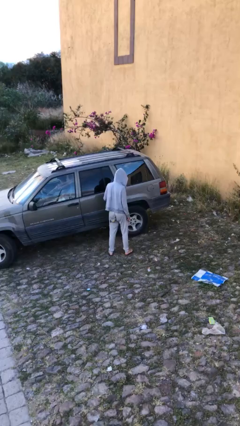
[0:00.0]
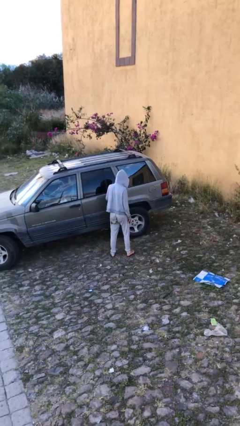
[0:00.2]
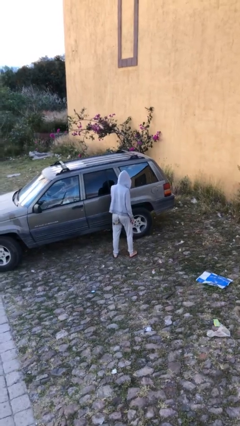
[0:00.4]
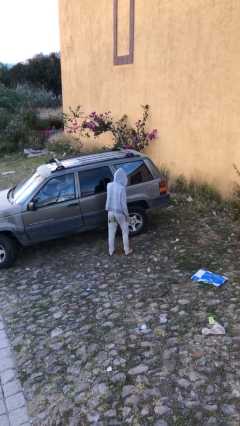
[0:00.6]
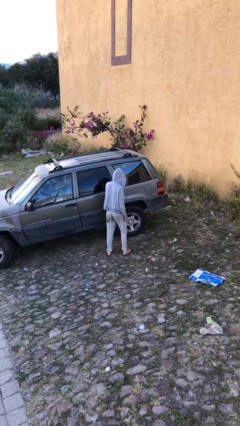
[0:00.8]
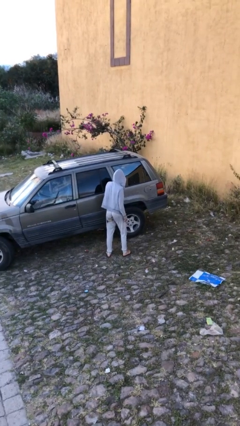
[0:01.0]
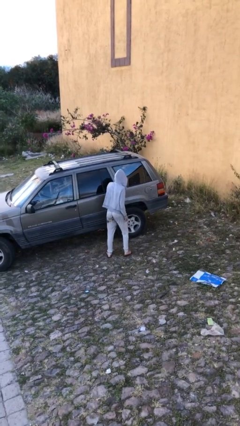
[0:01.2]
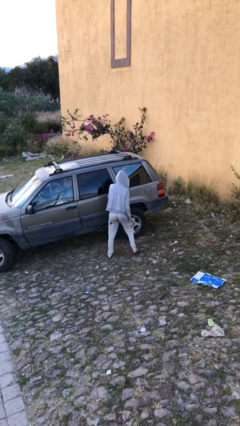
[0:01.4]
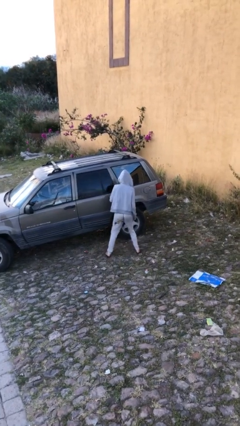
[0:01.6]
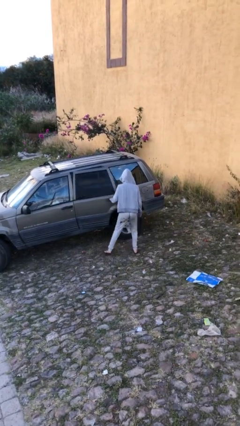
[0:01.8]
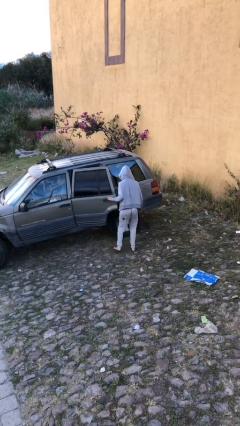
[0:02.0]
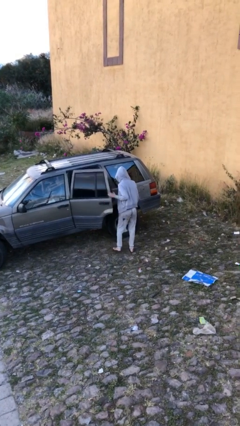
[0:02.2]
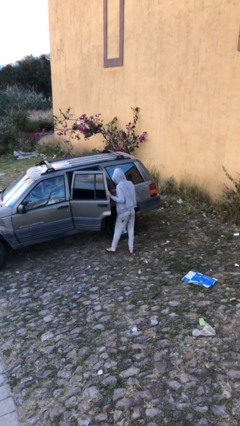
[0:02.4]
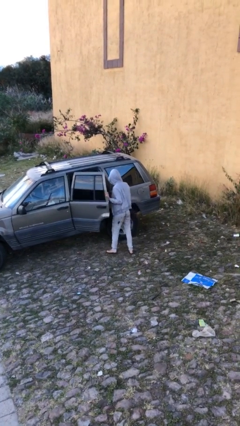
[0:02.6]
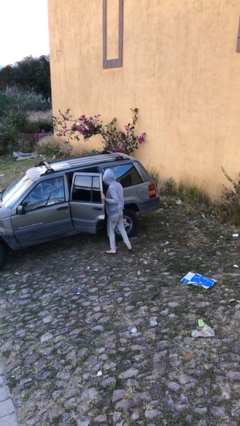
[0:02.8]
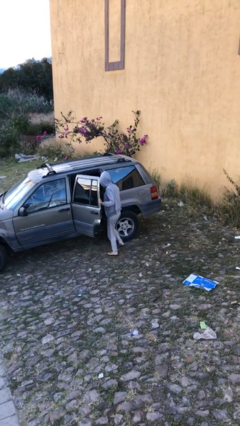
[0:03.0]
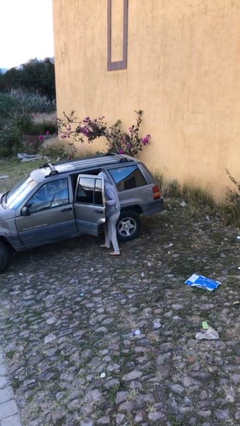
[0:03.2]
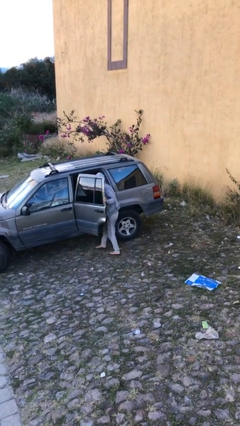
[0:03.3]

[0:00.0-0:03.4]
person opens car door

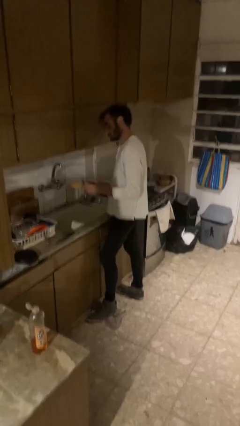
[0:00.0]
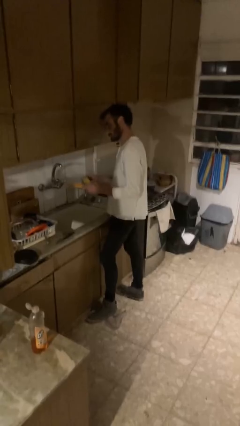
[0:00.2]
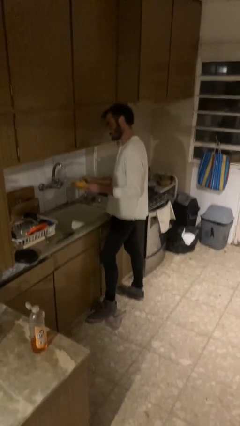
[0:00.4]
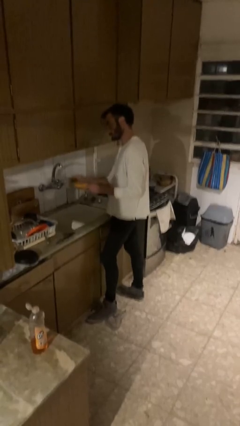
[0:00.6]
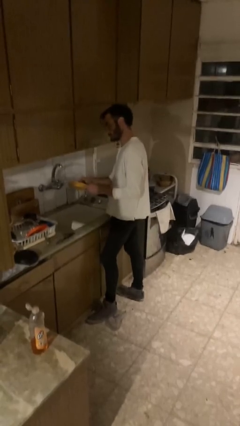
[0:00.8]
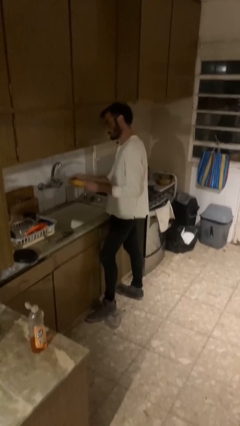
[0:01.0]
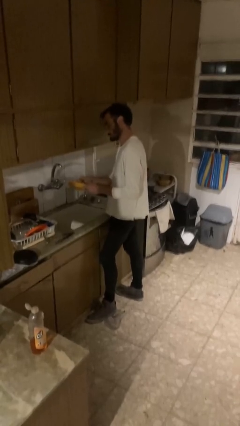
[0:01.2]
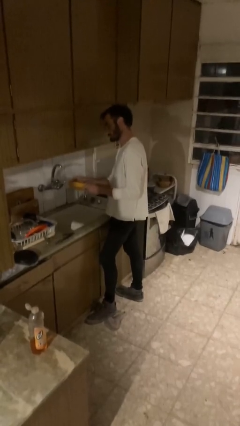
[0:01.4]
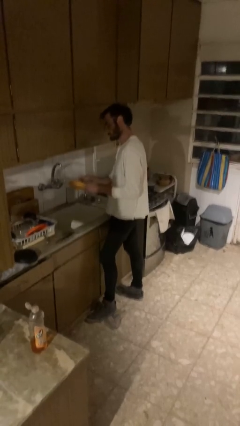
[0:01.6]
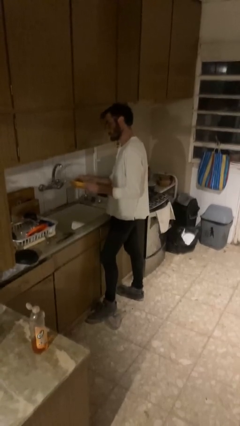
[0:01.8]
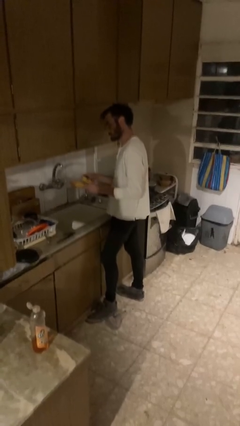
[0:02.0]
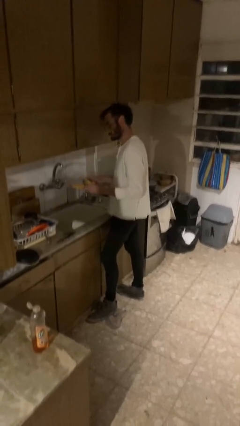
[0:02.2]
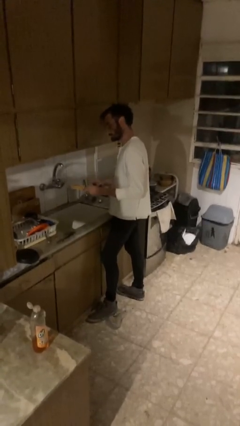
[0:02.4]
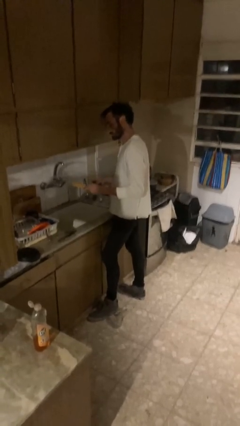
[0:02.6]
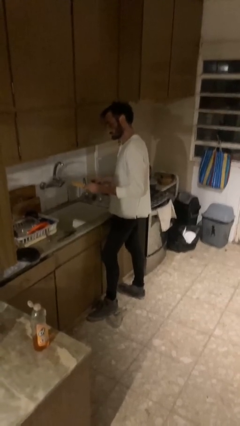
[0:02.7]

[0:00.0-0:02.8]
person washes dish

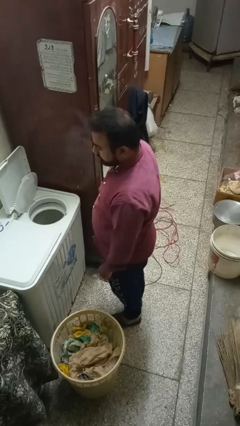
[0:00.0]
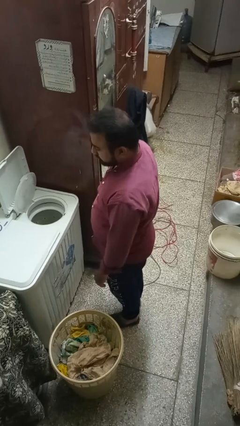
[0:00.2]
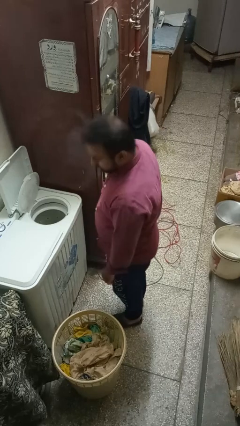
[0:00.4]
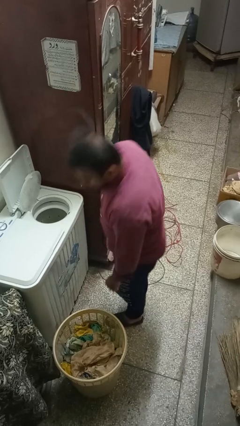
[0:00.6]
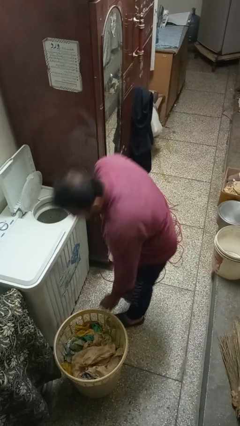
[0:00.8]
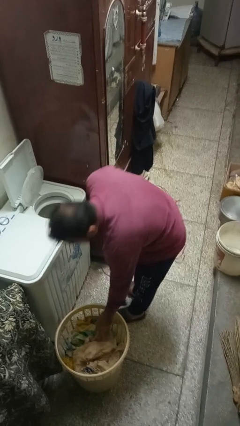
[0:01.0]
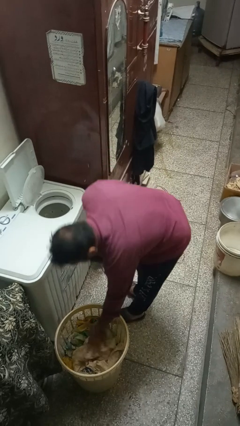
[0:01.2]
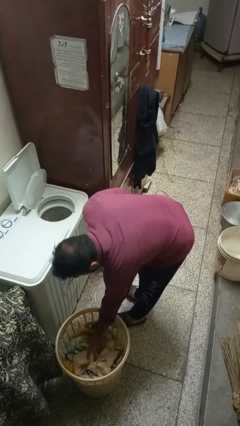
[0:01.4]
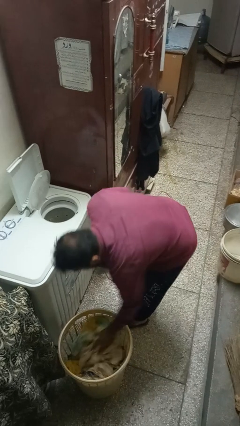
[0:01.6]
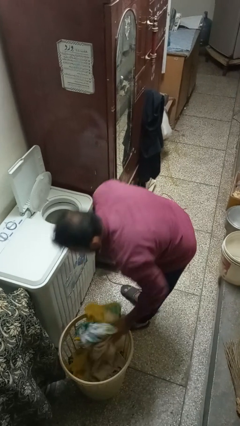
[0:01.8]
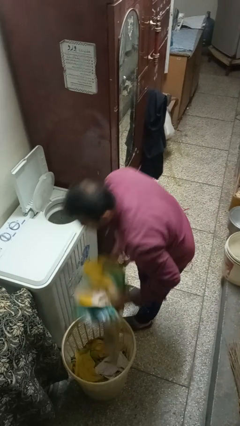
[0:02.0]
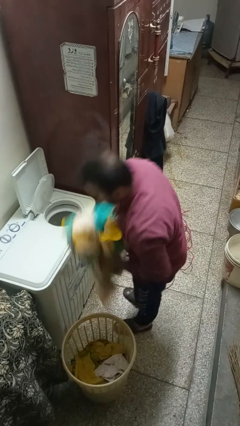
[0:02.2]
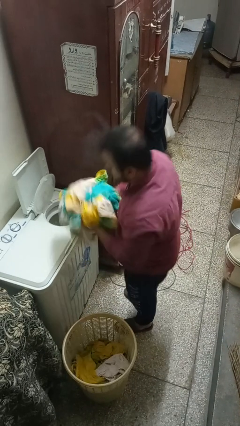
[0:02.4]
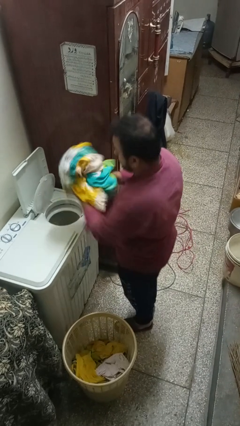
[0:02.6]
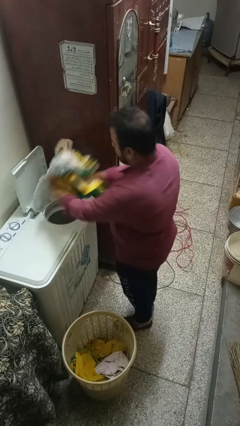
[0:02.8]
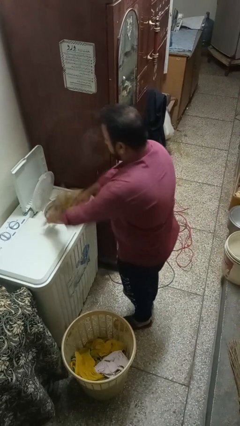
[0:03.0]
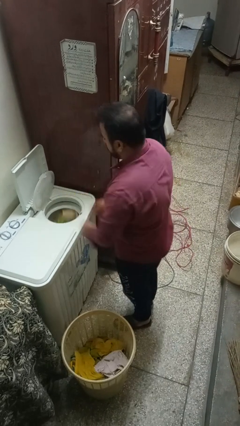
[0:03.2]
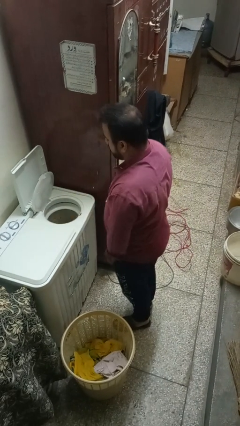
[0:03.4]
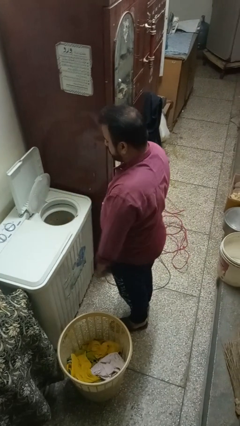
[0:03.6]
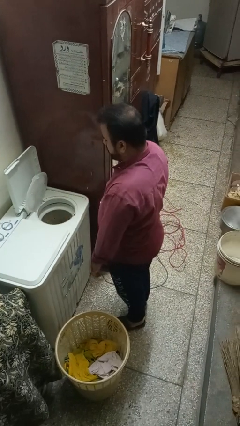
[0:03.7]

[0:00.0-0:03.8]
person loads dryer

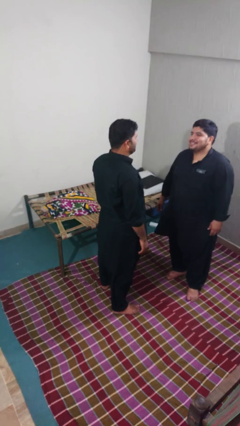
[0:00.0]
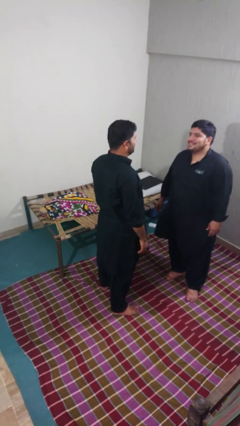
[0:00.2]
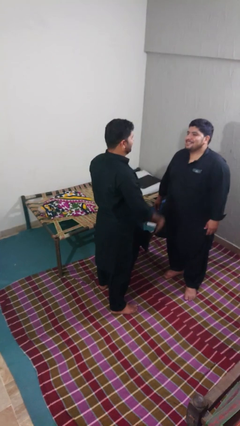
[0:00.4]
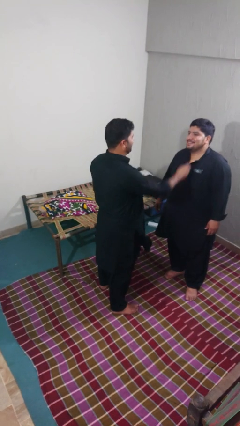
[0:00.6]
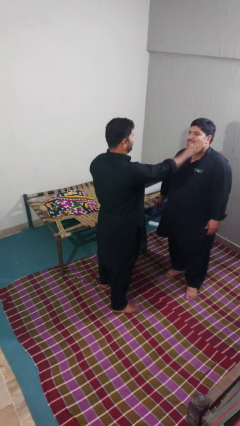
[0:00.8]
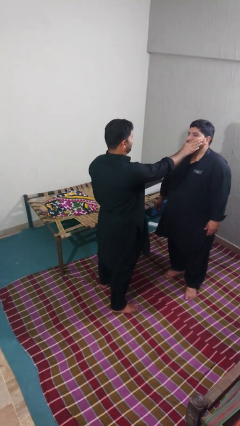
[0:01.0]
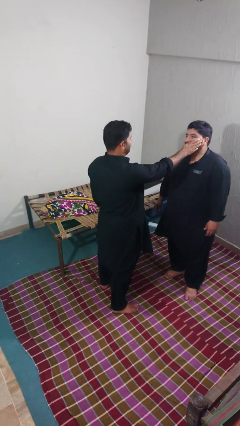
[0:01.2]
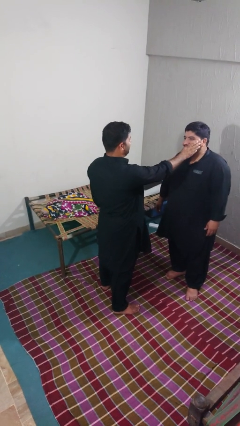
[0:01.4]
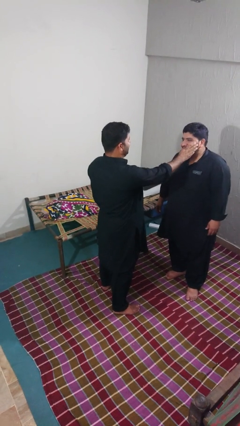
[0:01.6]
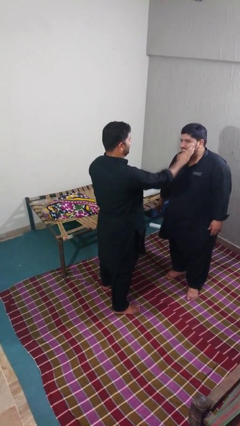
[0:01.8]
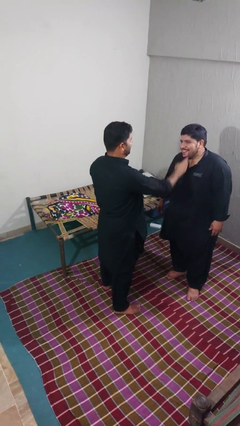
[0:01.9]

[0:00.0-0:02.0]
person touches face of person

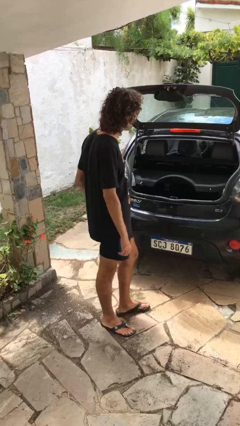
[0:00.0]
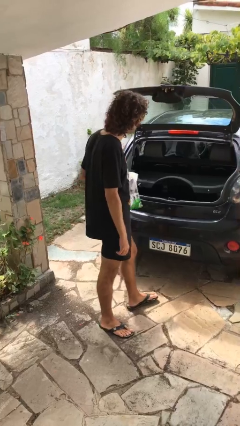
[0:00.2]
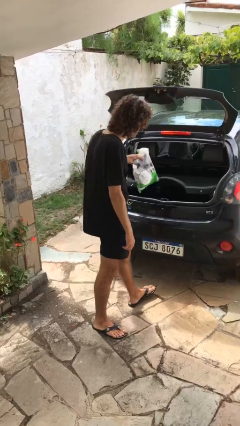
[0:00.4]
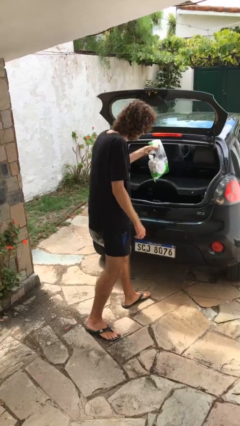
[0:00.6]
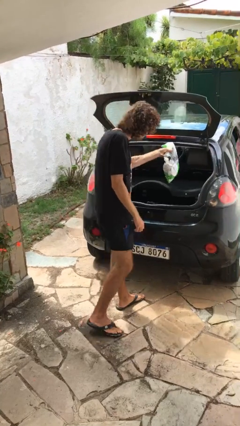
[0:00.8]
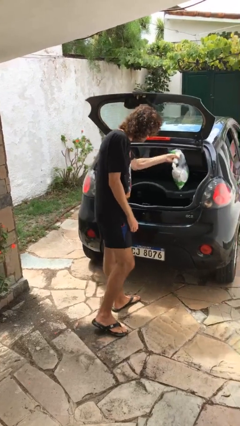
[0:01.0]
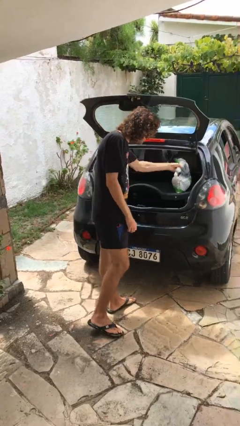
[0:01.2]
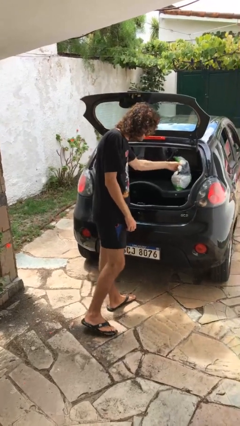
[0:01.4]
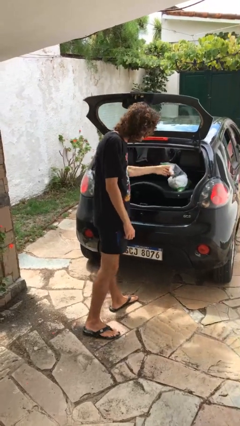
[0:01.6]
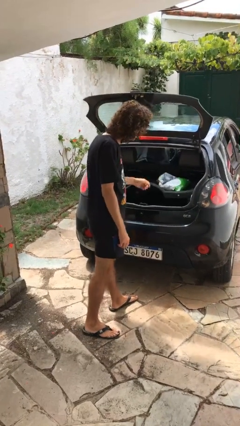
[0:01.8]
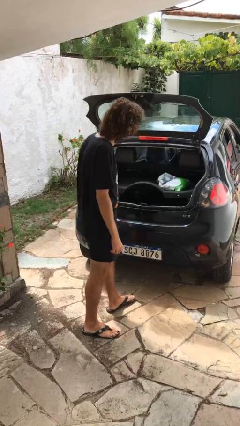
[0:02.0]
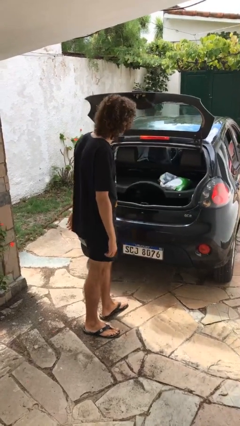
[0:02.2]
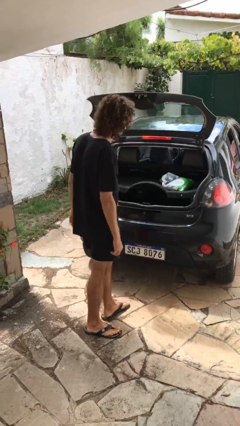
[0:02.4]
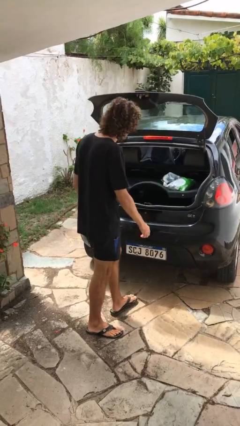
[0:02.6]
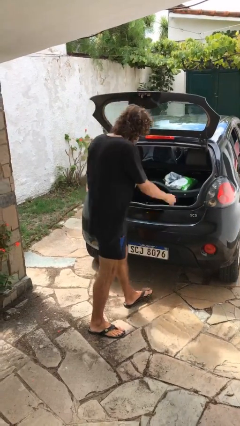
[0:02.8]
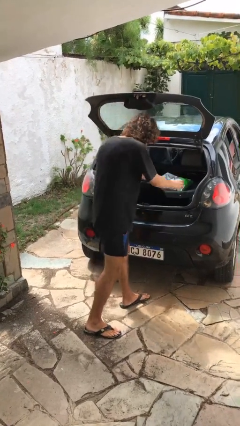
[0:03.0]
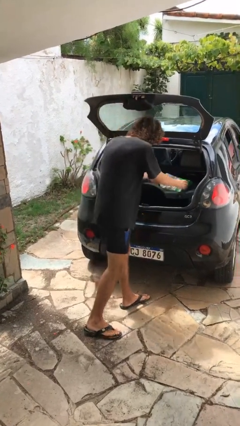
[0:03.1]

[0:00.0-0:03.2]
person loads car

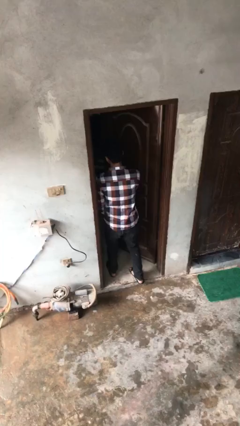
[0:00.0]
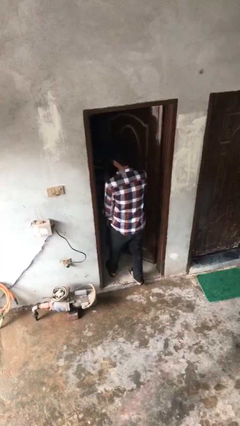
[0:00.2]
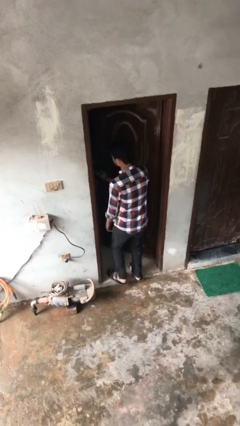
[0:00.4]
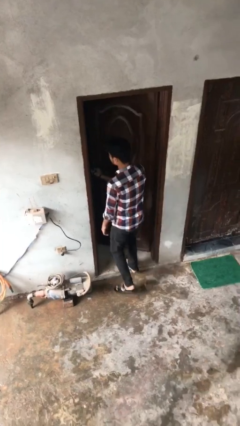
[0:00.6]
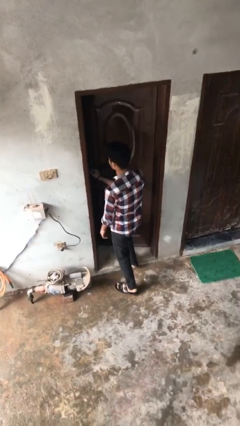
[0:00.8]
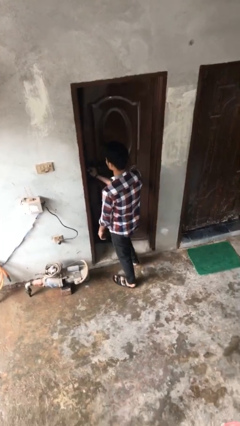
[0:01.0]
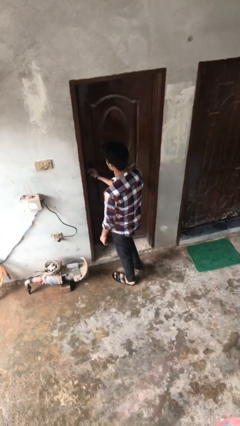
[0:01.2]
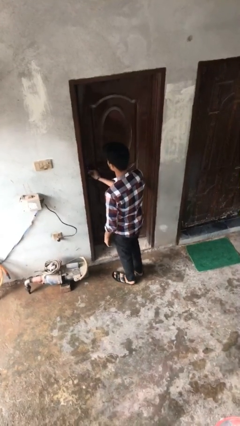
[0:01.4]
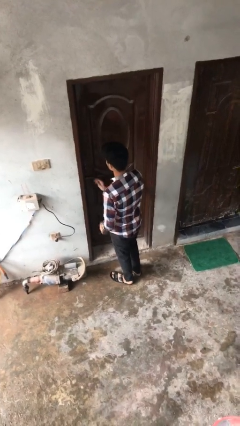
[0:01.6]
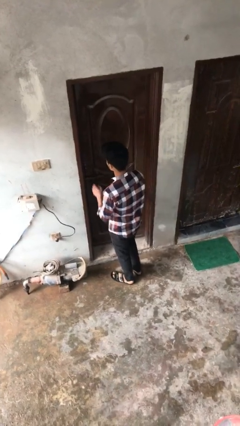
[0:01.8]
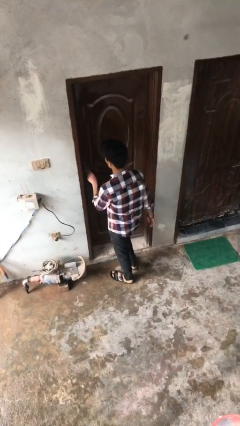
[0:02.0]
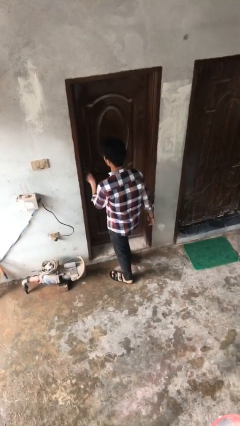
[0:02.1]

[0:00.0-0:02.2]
person closes facility door
